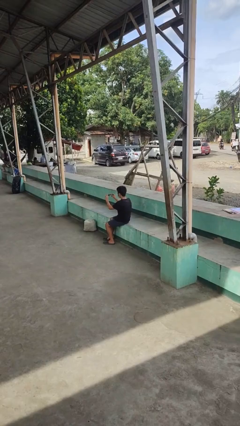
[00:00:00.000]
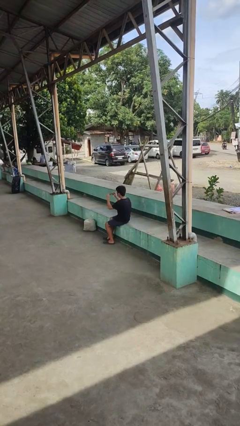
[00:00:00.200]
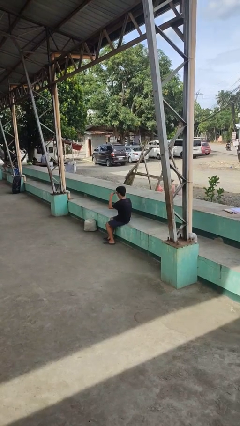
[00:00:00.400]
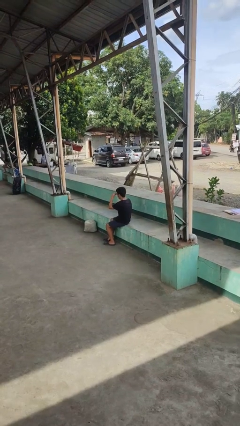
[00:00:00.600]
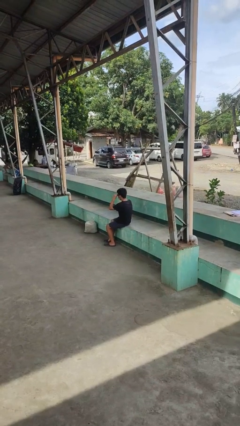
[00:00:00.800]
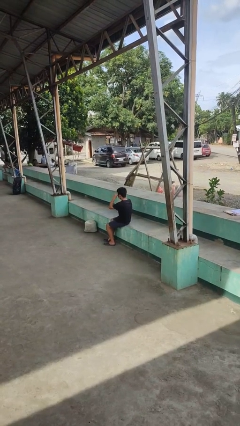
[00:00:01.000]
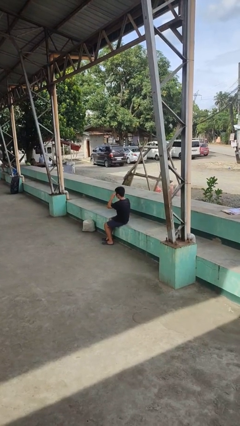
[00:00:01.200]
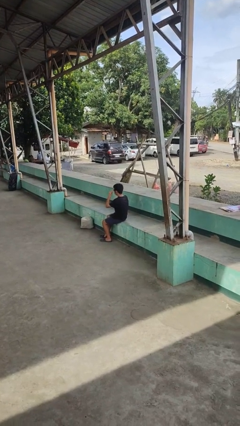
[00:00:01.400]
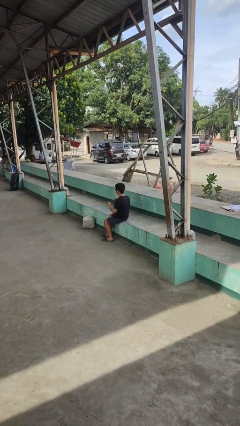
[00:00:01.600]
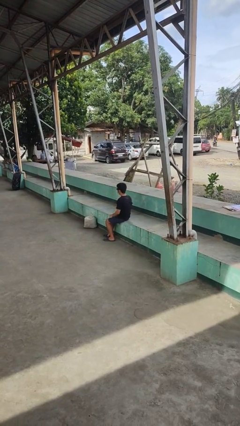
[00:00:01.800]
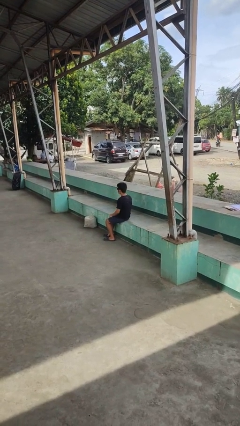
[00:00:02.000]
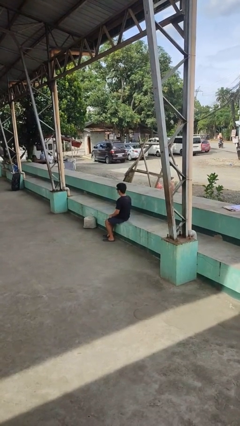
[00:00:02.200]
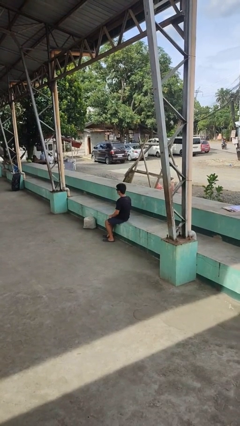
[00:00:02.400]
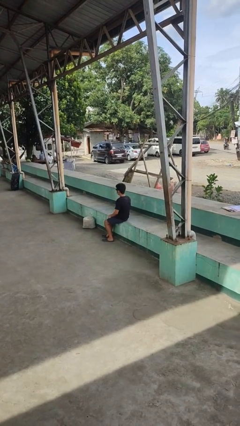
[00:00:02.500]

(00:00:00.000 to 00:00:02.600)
person puts on sunglasses

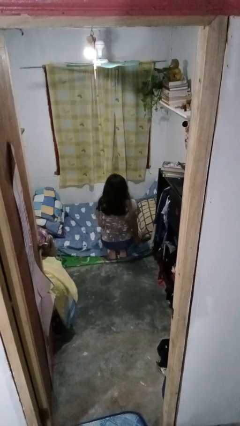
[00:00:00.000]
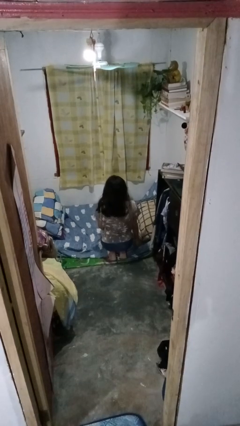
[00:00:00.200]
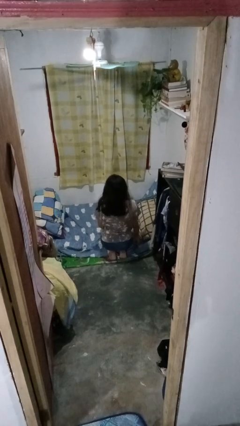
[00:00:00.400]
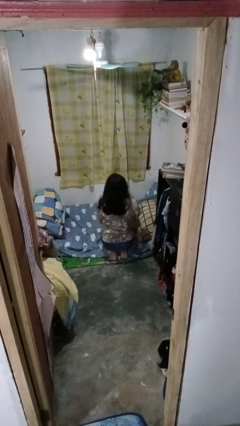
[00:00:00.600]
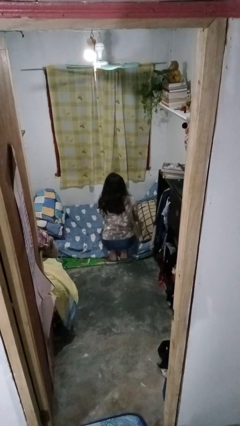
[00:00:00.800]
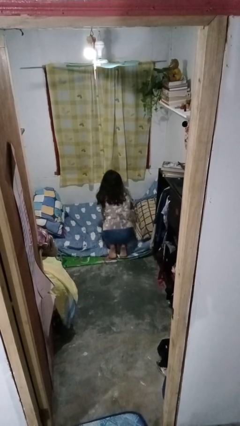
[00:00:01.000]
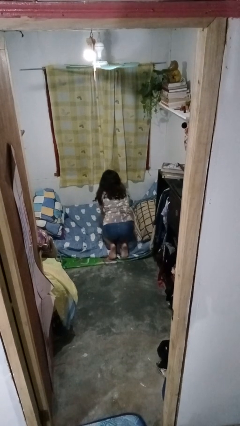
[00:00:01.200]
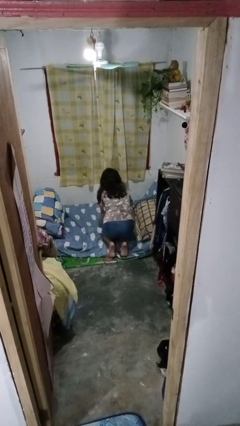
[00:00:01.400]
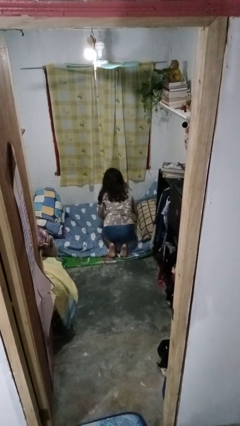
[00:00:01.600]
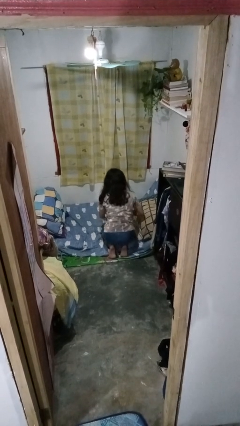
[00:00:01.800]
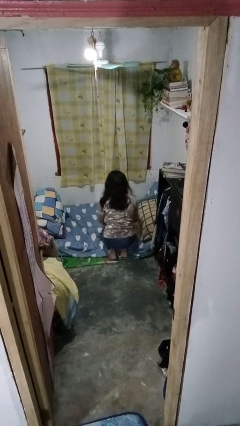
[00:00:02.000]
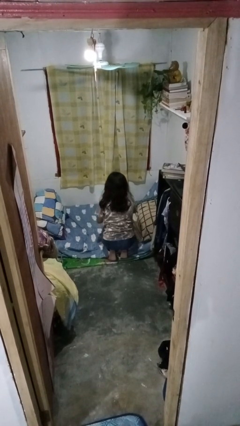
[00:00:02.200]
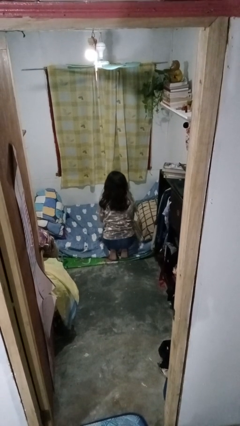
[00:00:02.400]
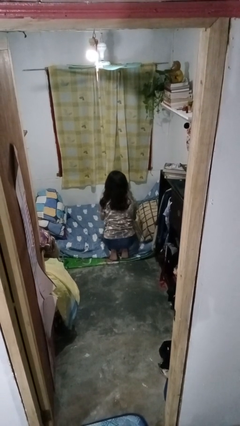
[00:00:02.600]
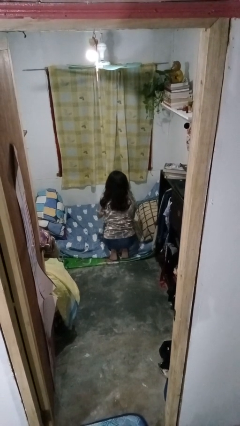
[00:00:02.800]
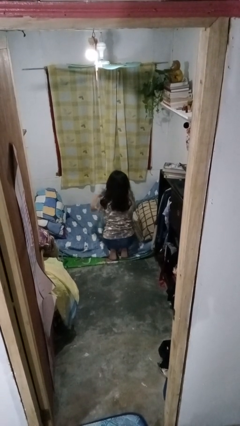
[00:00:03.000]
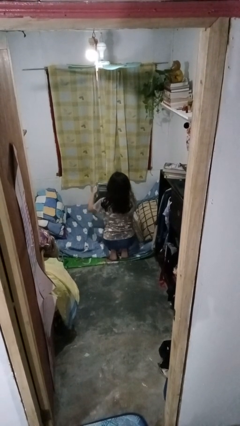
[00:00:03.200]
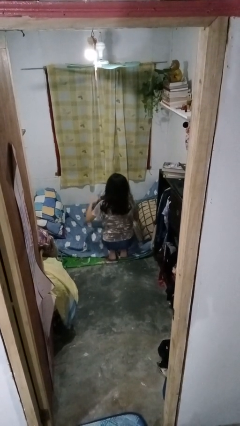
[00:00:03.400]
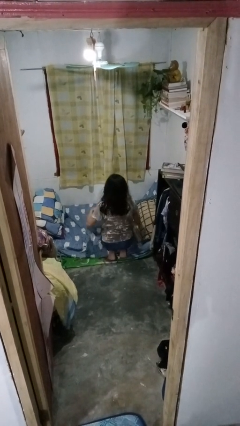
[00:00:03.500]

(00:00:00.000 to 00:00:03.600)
person makes bed

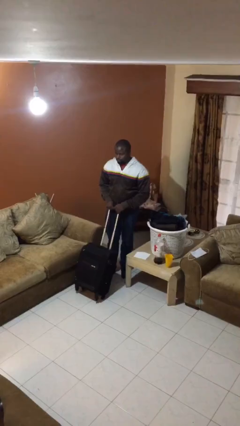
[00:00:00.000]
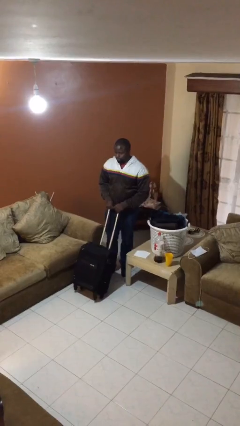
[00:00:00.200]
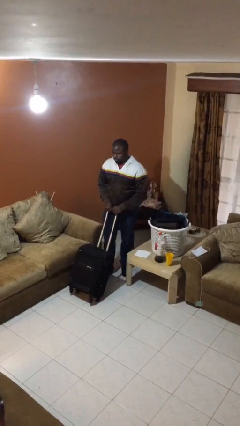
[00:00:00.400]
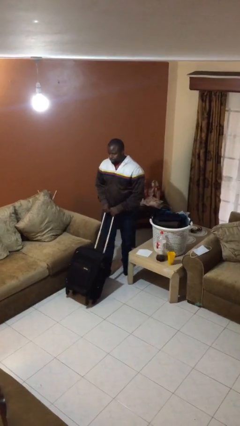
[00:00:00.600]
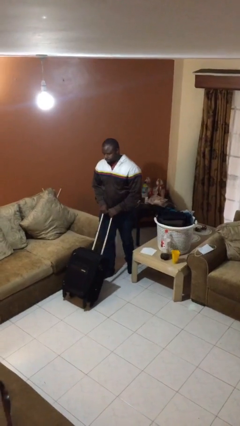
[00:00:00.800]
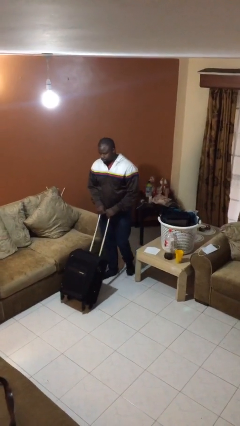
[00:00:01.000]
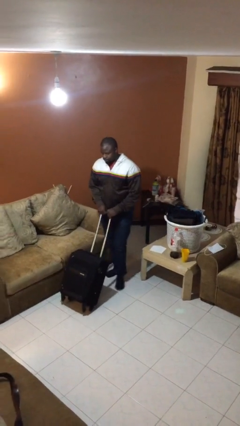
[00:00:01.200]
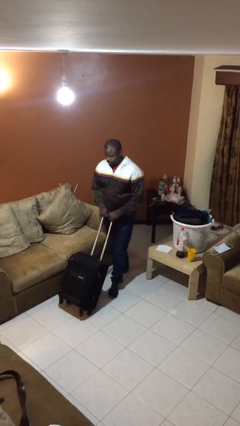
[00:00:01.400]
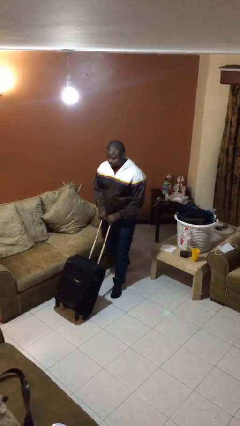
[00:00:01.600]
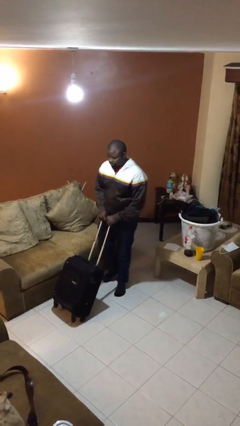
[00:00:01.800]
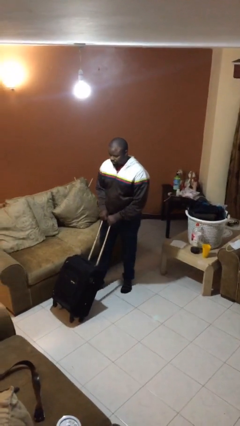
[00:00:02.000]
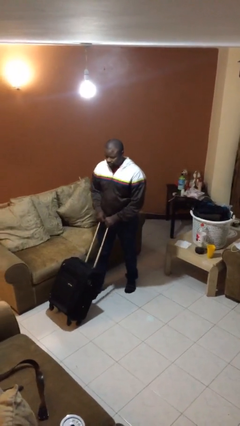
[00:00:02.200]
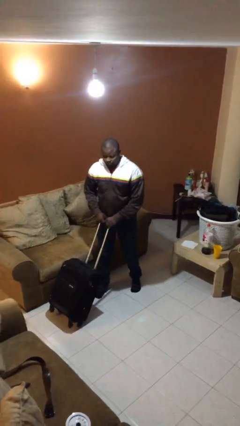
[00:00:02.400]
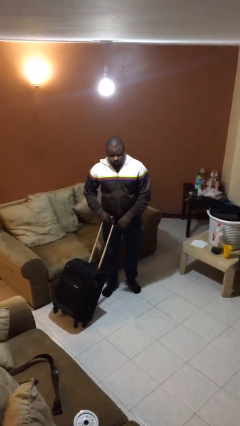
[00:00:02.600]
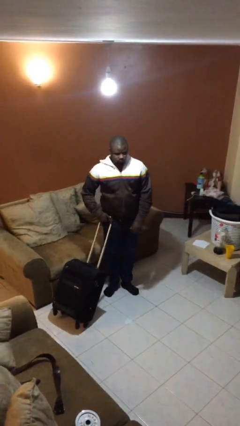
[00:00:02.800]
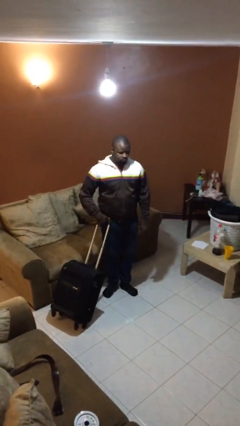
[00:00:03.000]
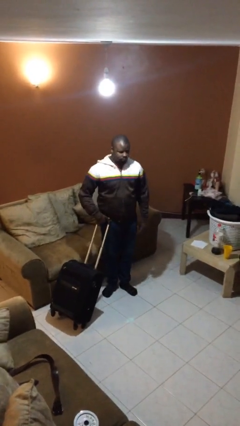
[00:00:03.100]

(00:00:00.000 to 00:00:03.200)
person pushes wheeled cart

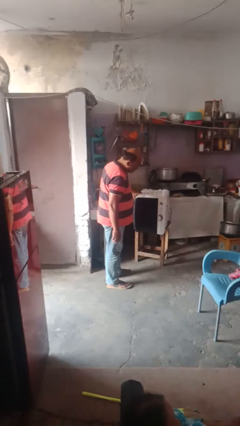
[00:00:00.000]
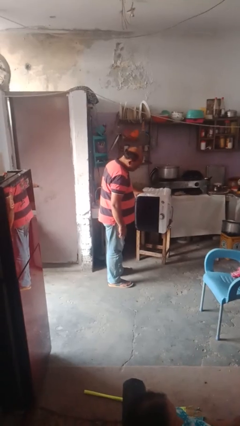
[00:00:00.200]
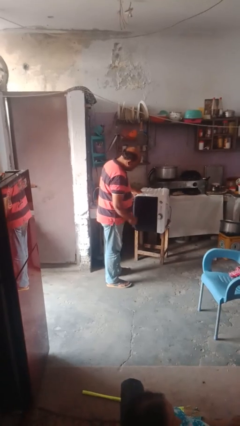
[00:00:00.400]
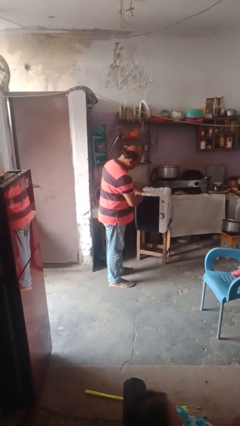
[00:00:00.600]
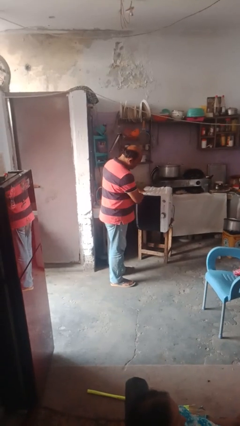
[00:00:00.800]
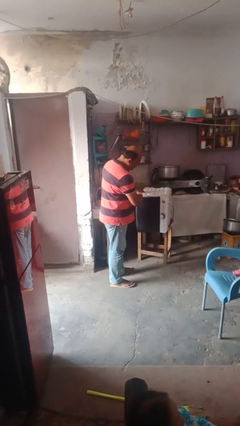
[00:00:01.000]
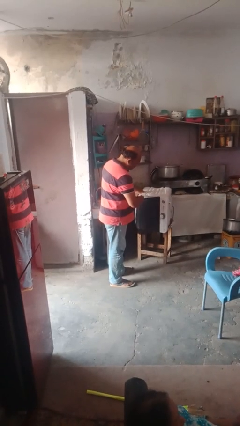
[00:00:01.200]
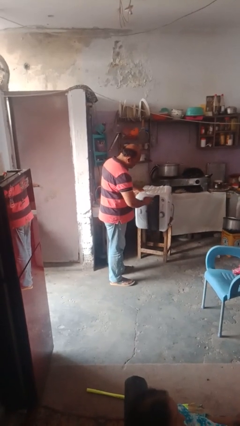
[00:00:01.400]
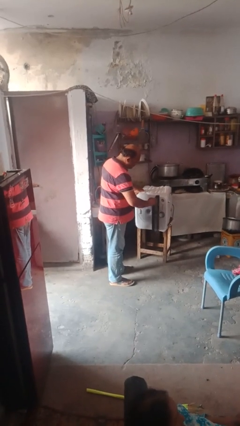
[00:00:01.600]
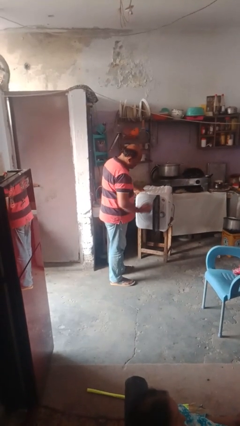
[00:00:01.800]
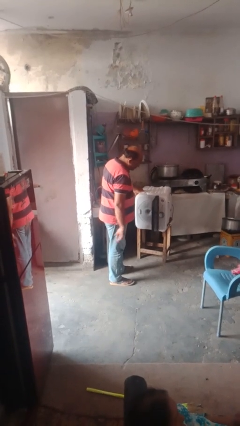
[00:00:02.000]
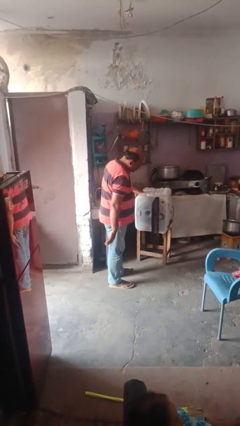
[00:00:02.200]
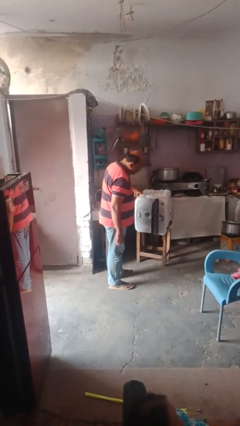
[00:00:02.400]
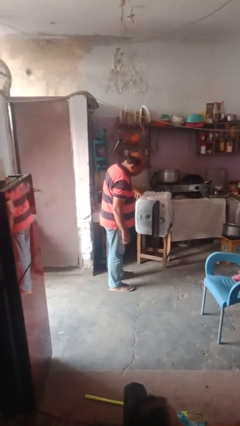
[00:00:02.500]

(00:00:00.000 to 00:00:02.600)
person opens dishwasher

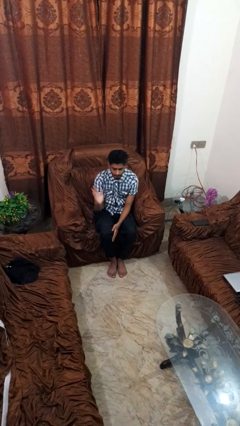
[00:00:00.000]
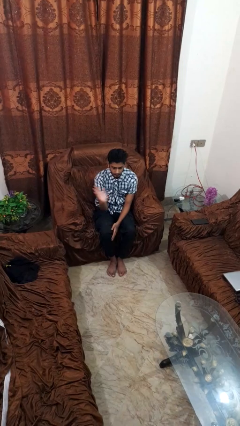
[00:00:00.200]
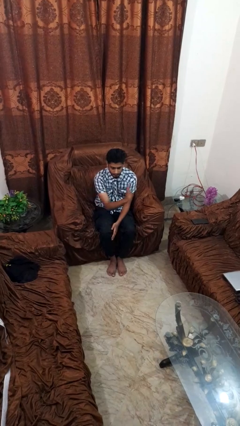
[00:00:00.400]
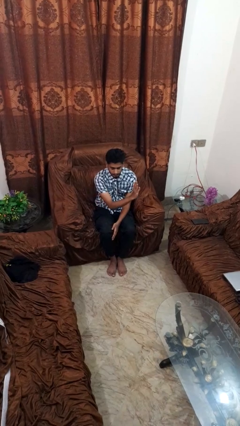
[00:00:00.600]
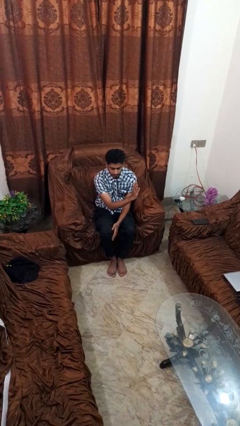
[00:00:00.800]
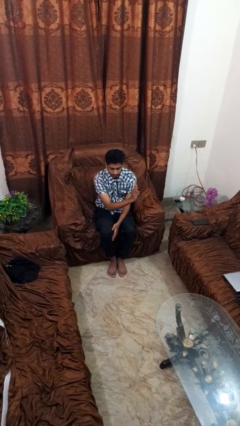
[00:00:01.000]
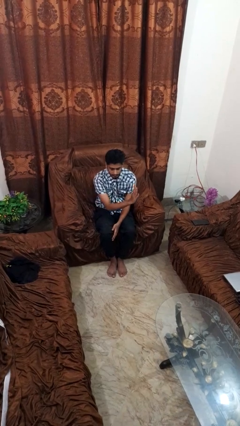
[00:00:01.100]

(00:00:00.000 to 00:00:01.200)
person gestures swipe left

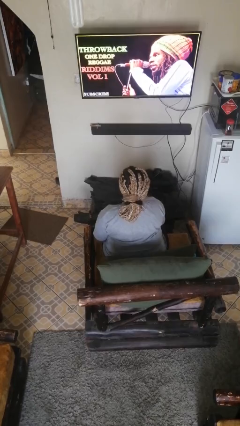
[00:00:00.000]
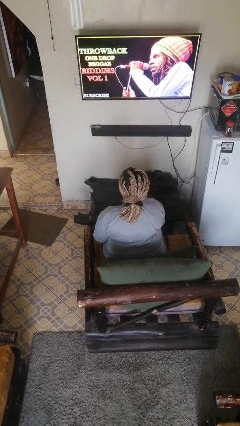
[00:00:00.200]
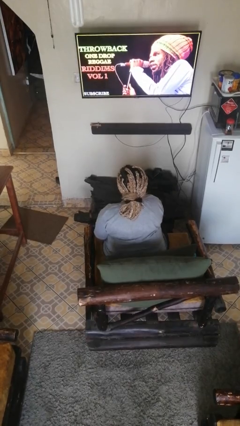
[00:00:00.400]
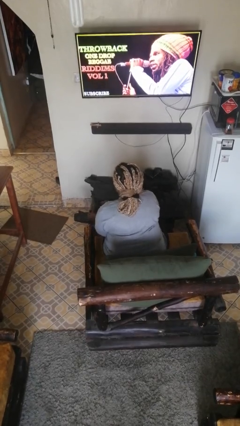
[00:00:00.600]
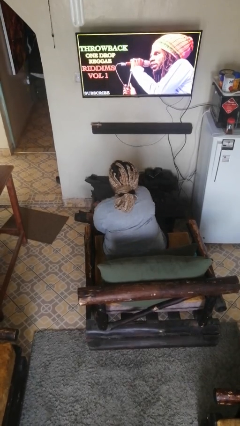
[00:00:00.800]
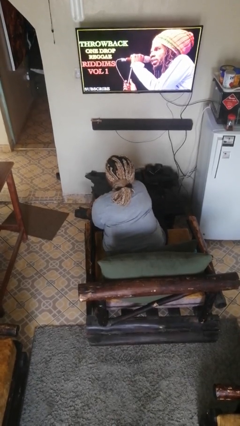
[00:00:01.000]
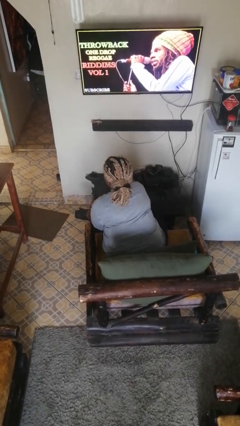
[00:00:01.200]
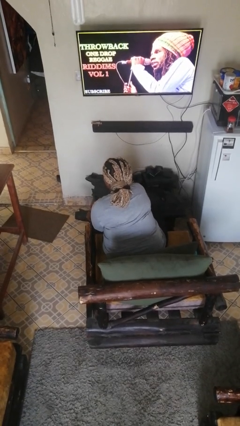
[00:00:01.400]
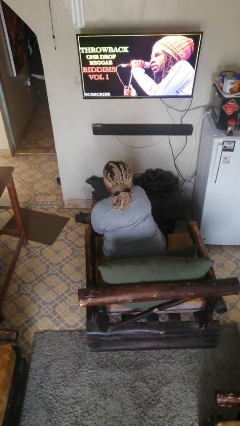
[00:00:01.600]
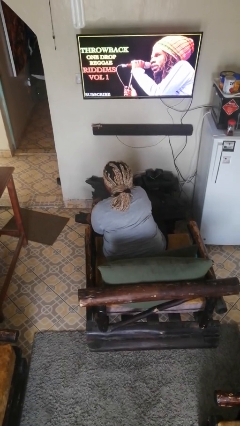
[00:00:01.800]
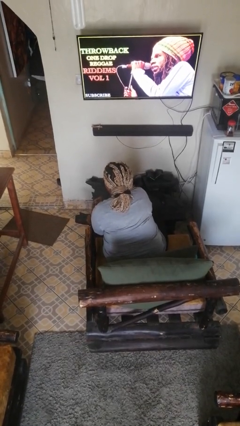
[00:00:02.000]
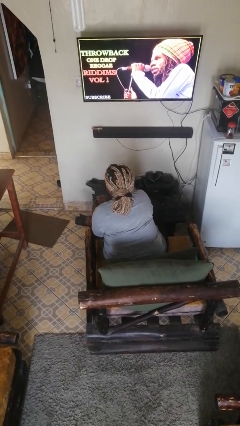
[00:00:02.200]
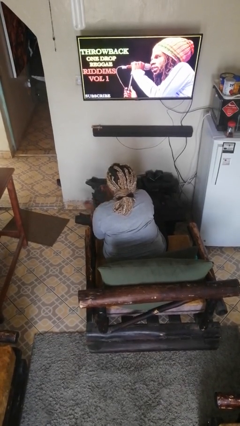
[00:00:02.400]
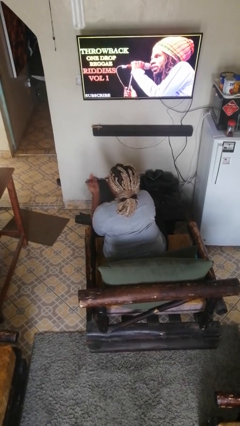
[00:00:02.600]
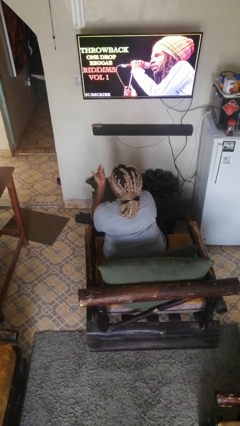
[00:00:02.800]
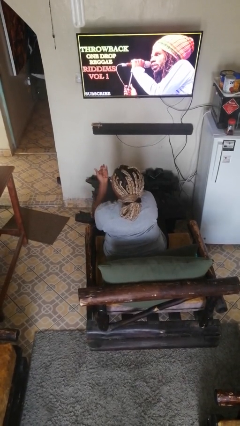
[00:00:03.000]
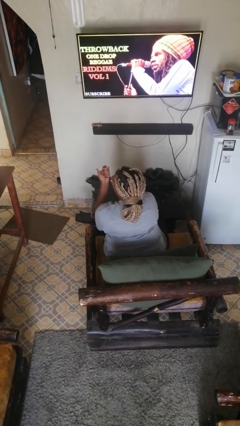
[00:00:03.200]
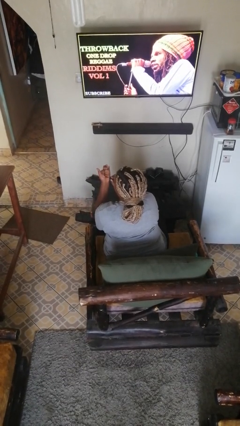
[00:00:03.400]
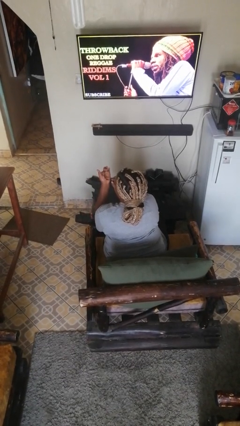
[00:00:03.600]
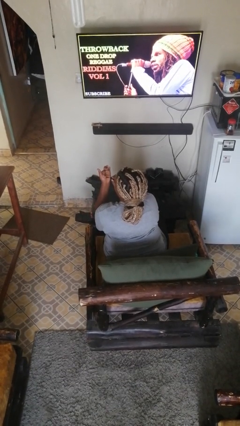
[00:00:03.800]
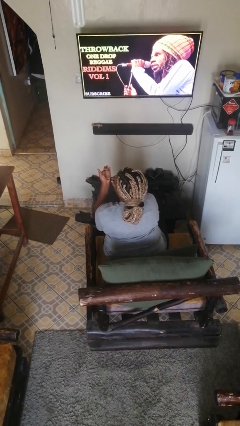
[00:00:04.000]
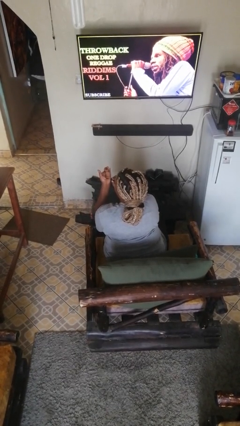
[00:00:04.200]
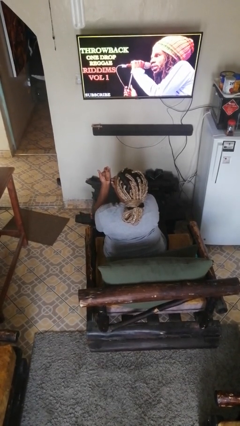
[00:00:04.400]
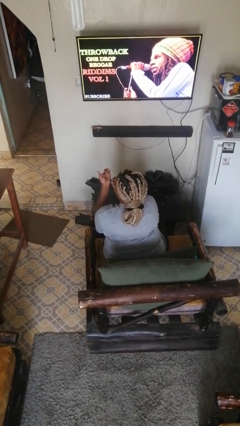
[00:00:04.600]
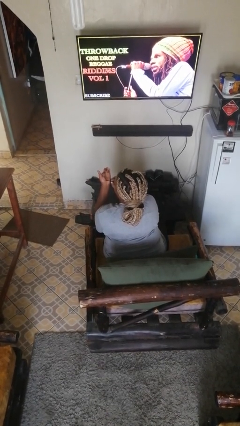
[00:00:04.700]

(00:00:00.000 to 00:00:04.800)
person paints fingernails
